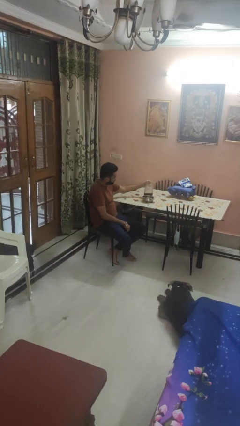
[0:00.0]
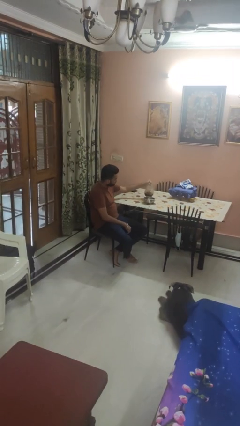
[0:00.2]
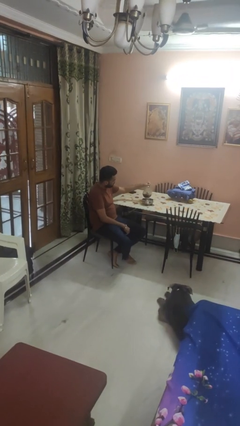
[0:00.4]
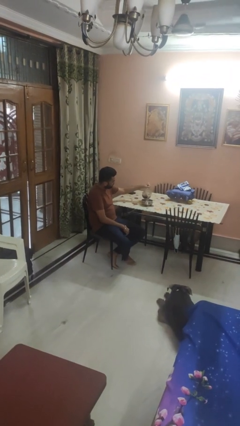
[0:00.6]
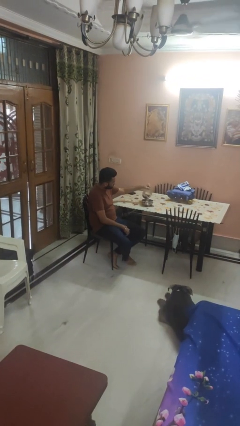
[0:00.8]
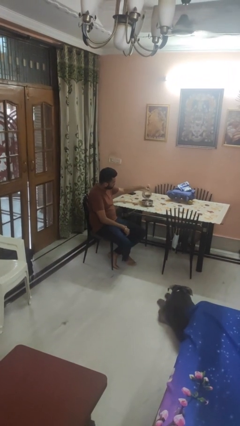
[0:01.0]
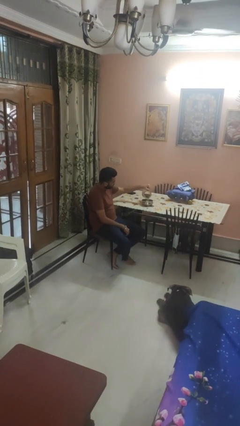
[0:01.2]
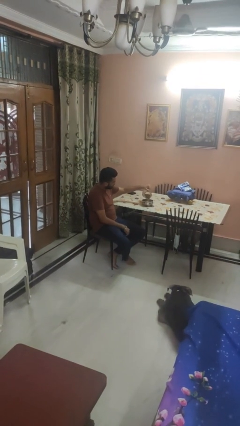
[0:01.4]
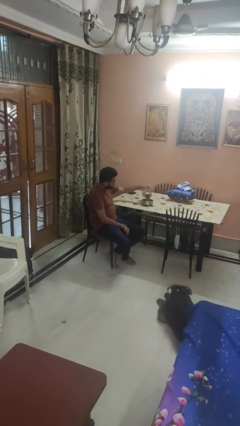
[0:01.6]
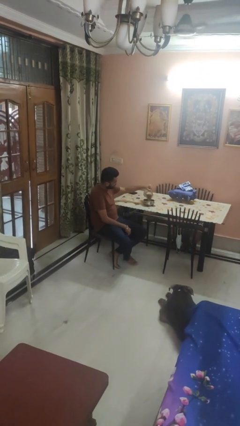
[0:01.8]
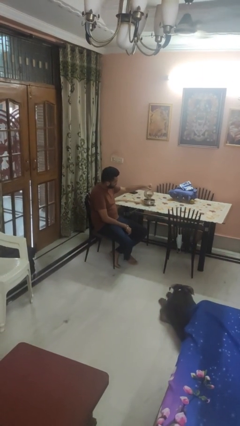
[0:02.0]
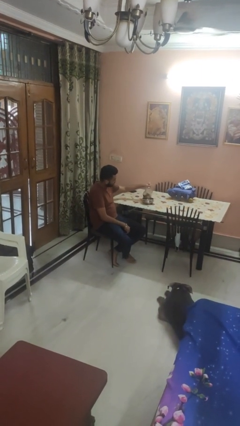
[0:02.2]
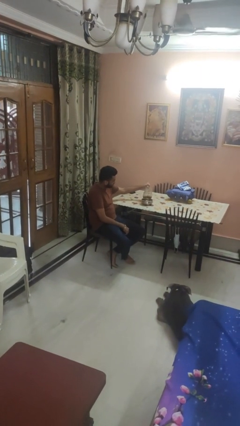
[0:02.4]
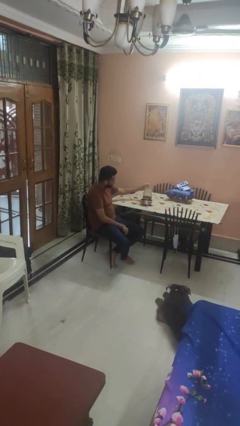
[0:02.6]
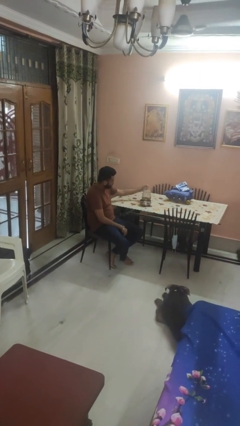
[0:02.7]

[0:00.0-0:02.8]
person pours into bowl

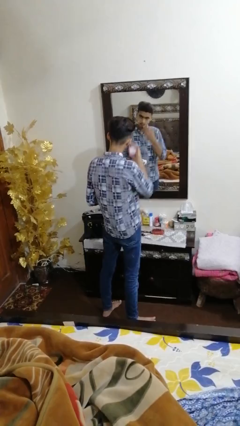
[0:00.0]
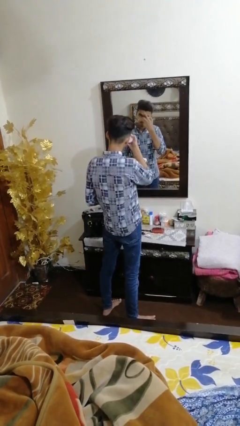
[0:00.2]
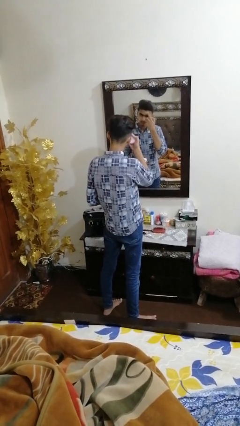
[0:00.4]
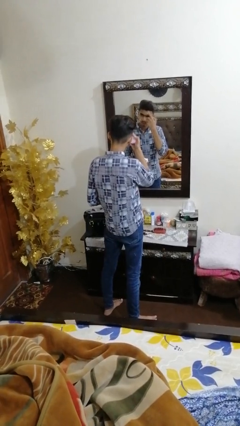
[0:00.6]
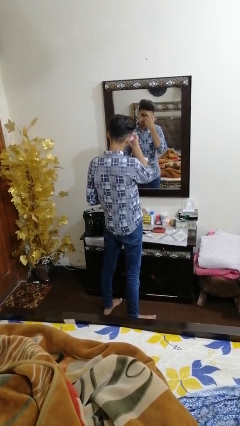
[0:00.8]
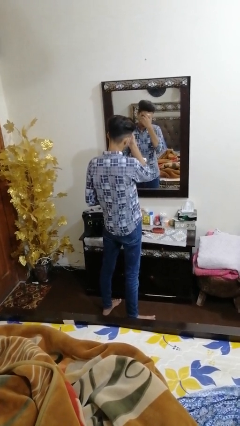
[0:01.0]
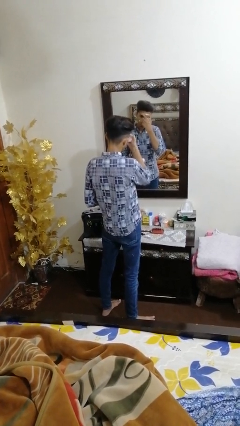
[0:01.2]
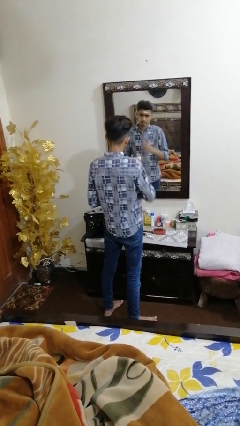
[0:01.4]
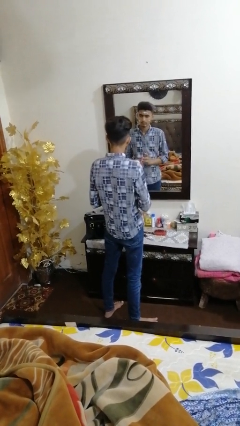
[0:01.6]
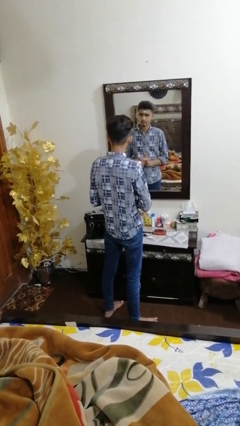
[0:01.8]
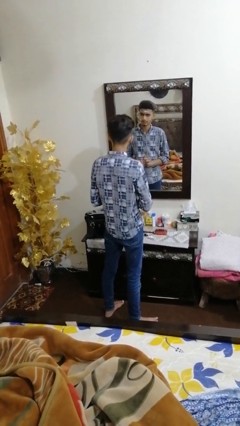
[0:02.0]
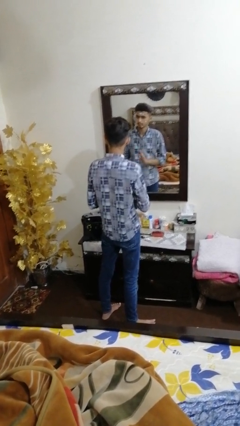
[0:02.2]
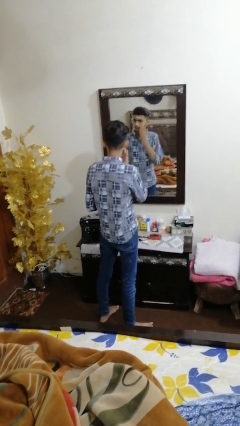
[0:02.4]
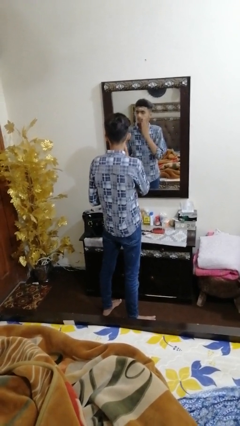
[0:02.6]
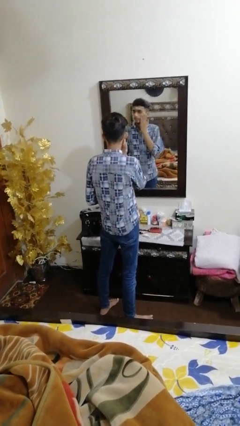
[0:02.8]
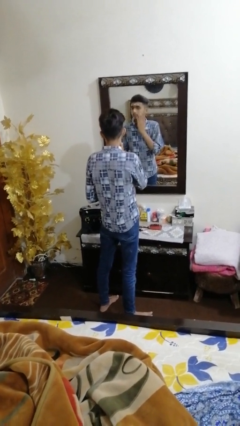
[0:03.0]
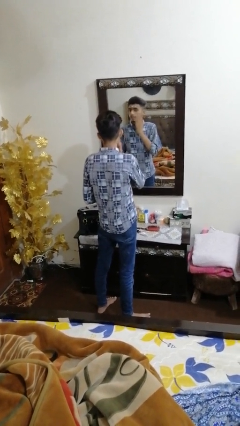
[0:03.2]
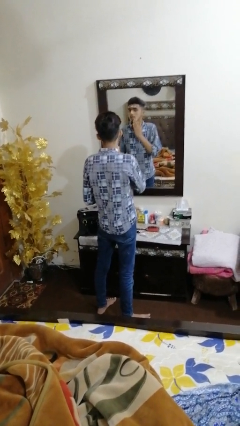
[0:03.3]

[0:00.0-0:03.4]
person applies foundation makeup

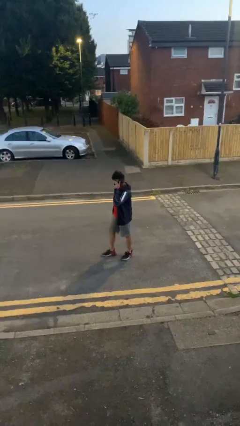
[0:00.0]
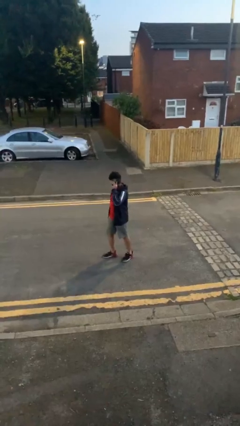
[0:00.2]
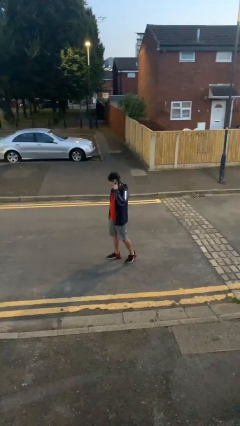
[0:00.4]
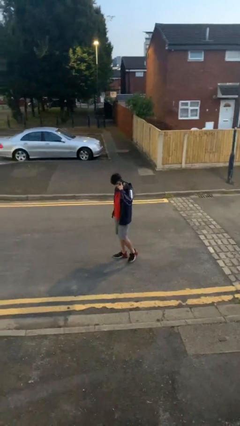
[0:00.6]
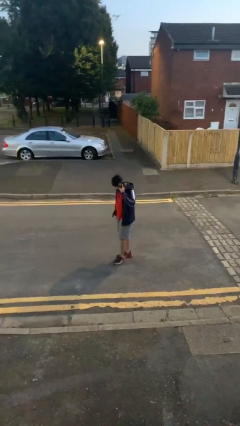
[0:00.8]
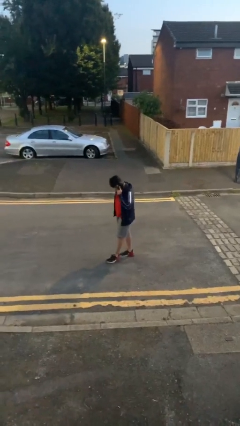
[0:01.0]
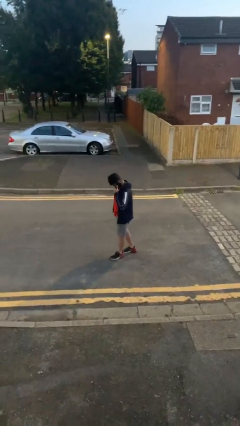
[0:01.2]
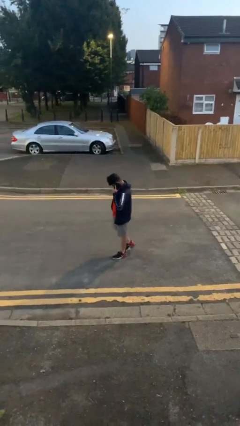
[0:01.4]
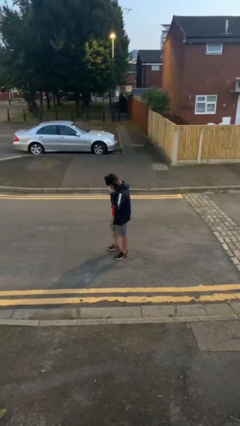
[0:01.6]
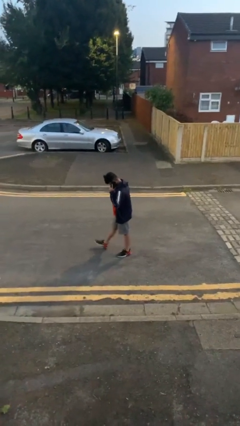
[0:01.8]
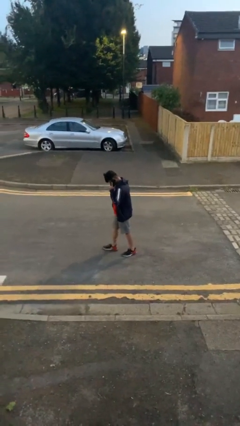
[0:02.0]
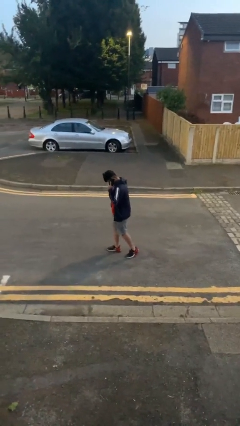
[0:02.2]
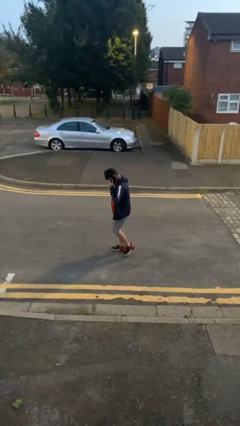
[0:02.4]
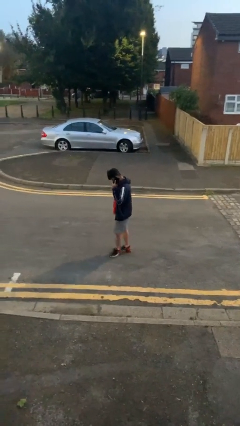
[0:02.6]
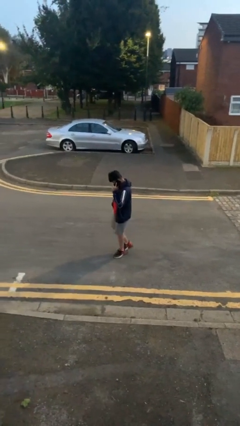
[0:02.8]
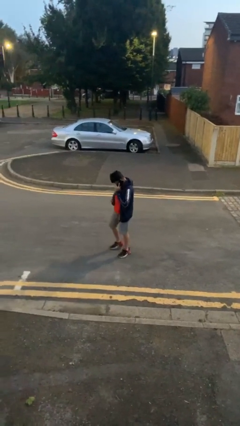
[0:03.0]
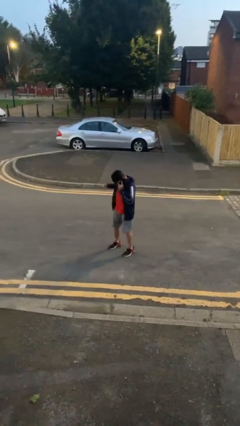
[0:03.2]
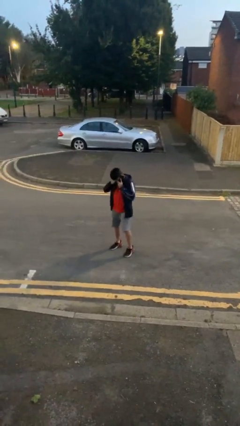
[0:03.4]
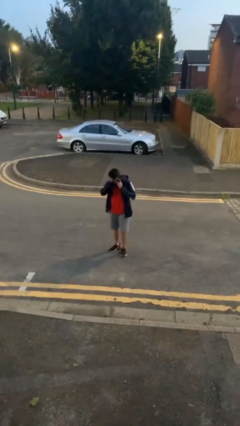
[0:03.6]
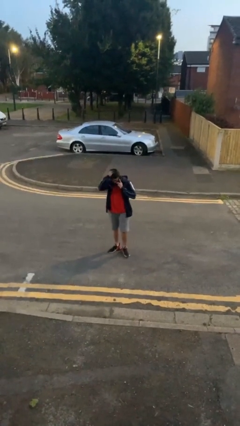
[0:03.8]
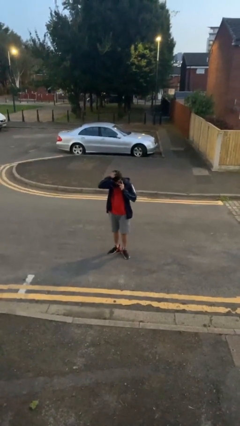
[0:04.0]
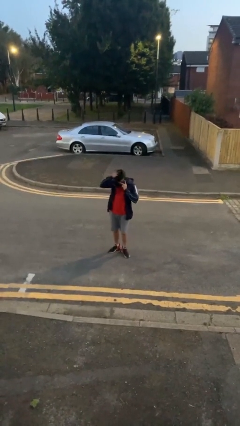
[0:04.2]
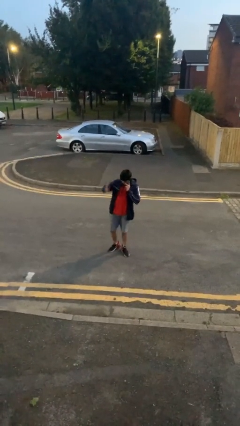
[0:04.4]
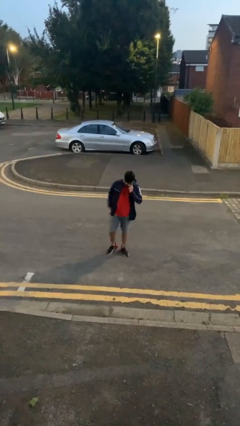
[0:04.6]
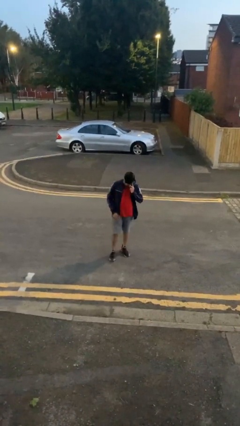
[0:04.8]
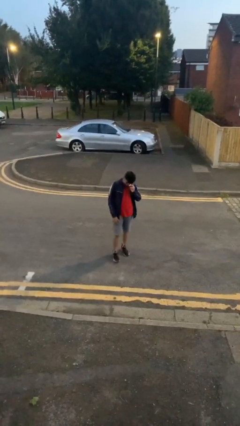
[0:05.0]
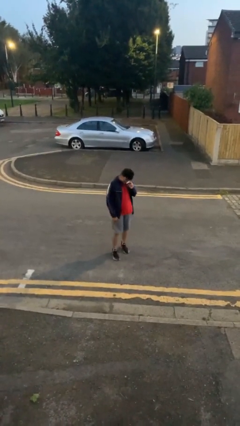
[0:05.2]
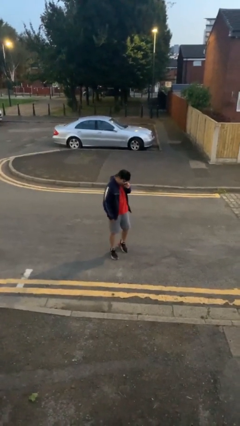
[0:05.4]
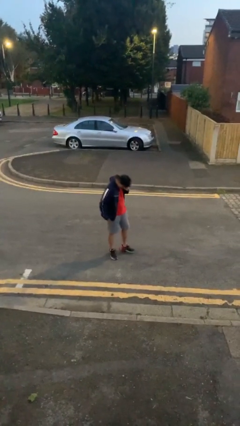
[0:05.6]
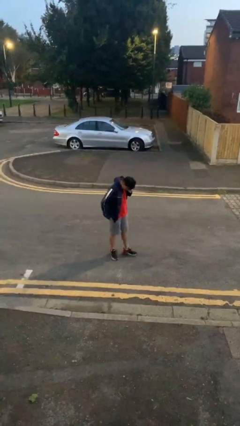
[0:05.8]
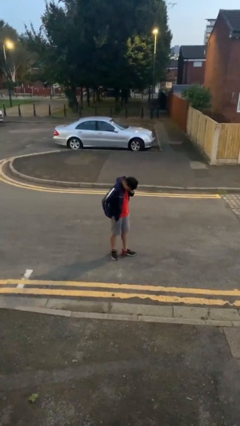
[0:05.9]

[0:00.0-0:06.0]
person talks on phone

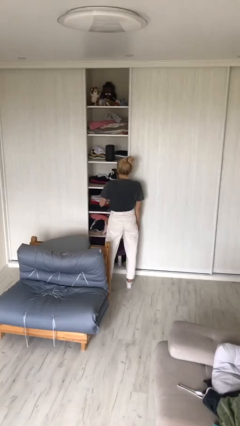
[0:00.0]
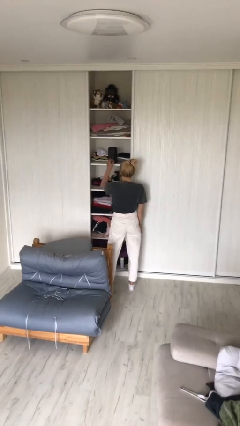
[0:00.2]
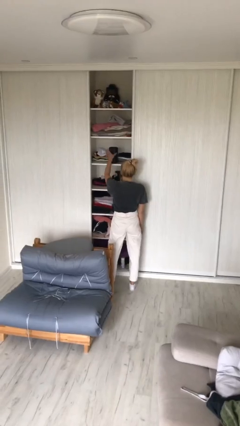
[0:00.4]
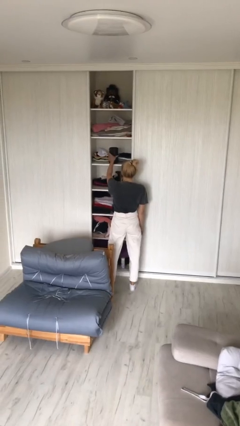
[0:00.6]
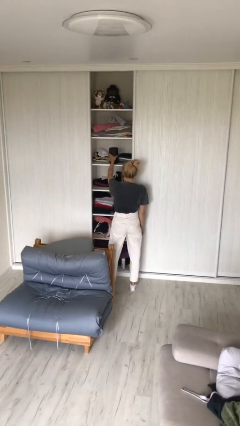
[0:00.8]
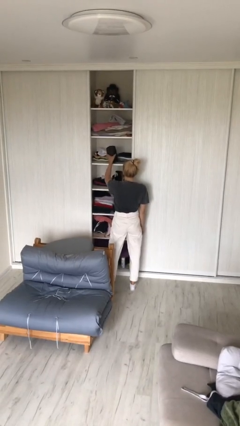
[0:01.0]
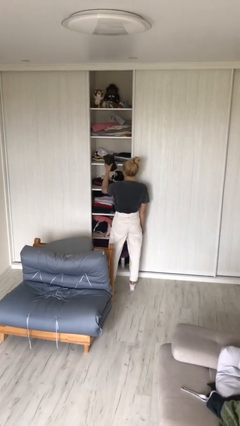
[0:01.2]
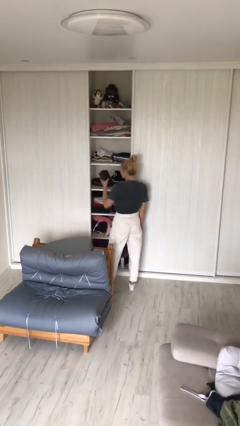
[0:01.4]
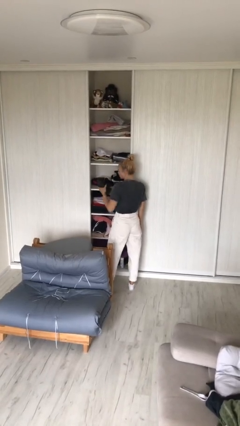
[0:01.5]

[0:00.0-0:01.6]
person picks up object from shelf

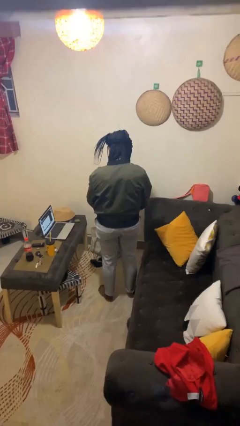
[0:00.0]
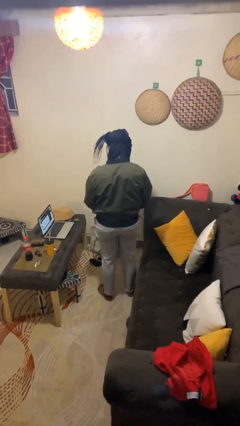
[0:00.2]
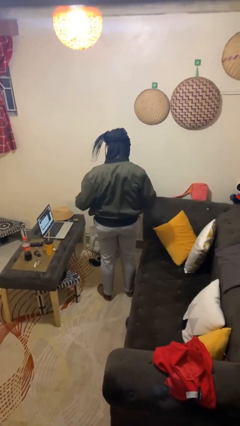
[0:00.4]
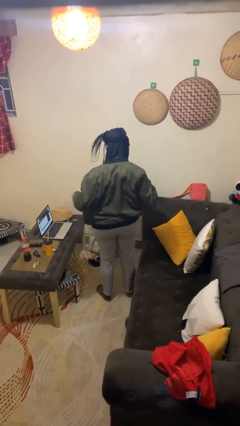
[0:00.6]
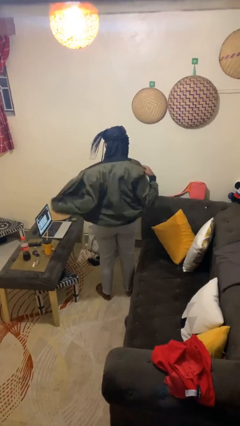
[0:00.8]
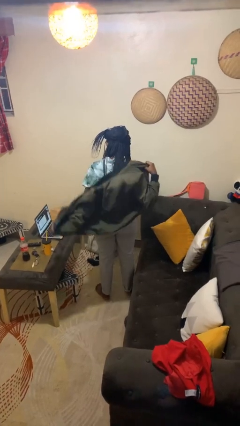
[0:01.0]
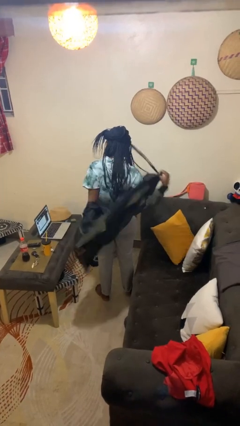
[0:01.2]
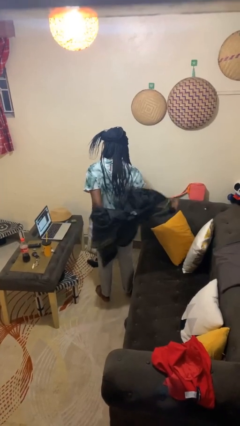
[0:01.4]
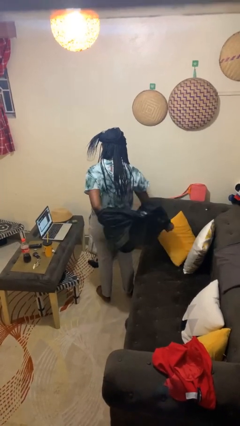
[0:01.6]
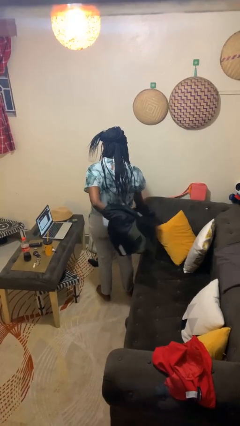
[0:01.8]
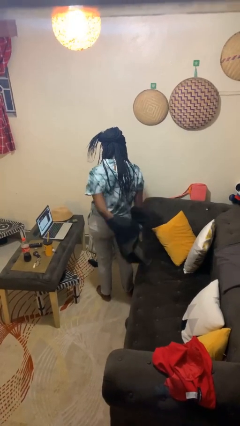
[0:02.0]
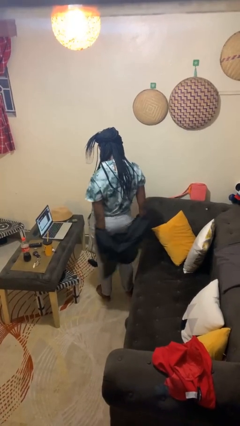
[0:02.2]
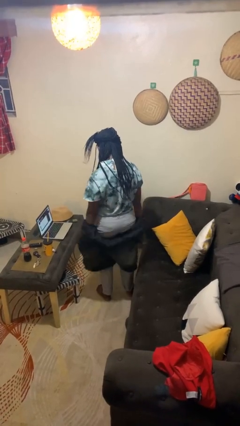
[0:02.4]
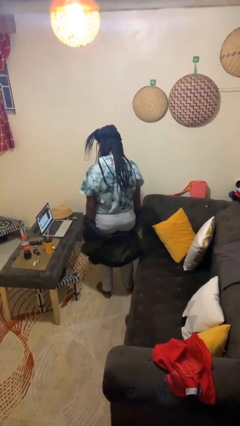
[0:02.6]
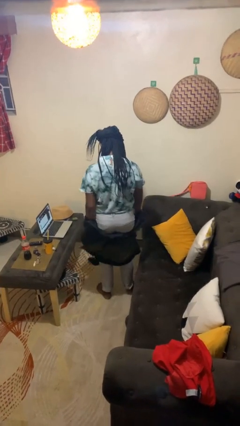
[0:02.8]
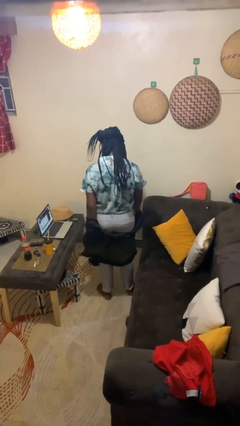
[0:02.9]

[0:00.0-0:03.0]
person takes off jacket

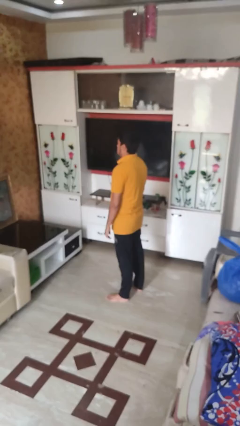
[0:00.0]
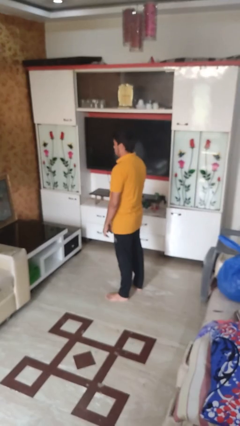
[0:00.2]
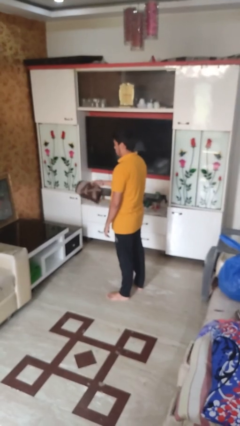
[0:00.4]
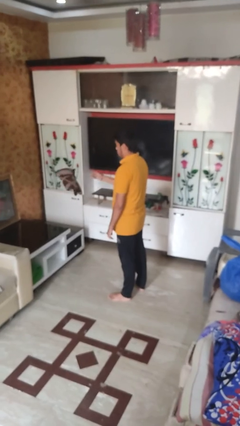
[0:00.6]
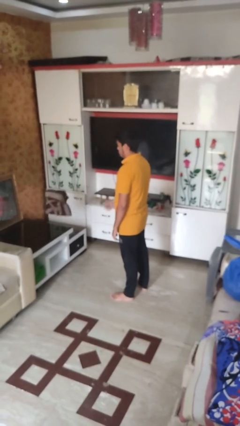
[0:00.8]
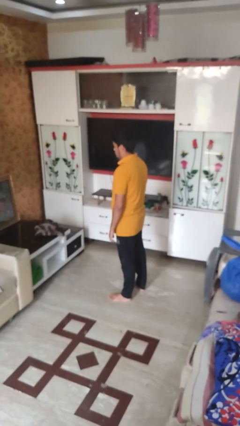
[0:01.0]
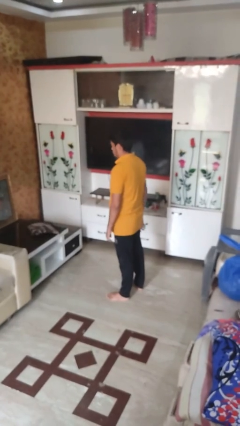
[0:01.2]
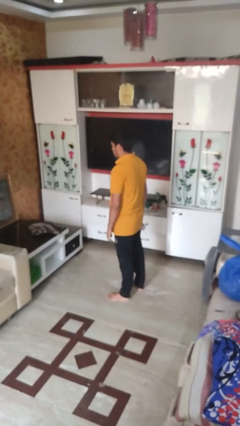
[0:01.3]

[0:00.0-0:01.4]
person throws object on table
